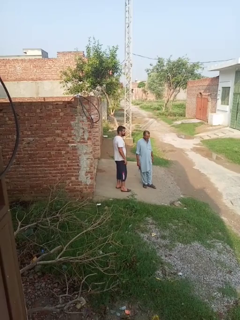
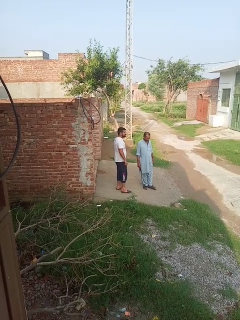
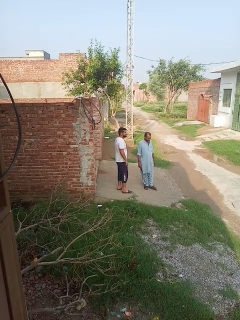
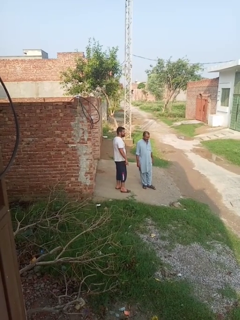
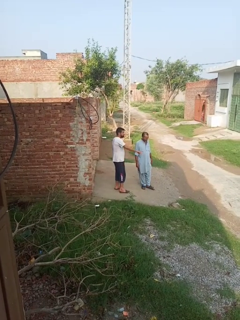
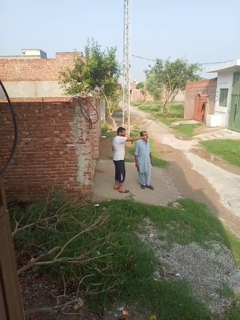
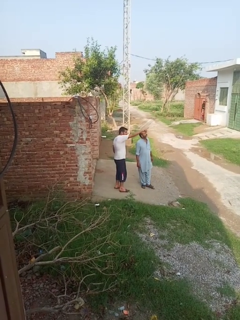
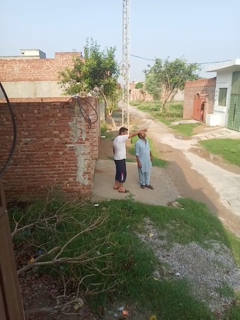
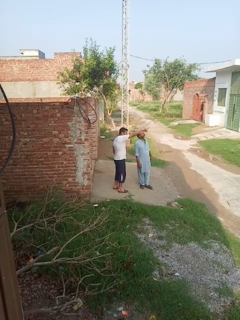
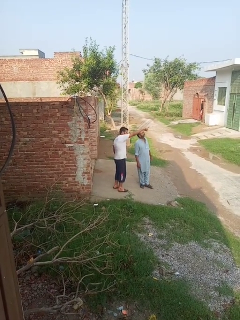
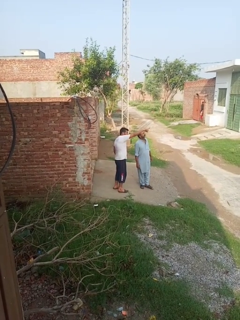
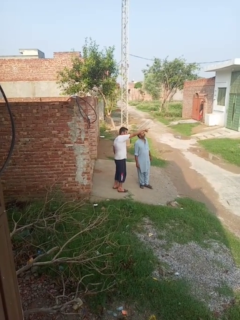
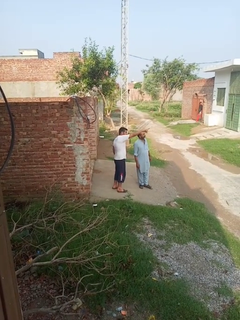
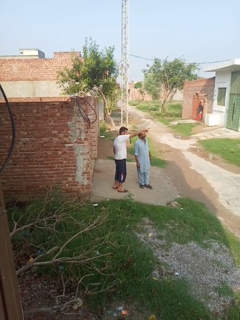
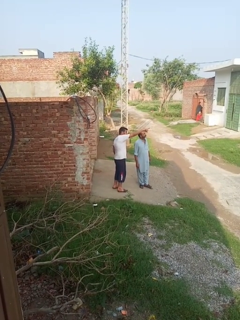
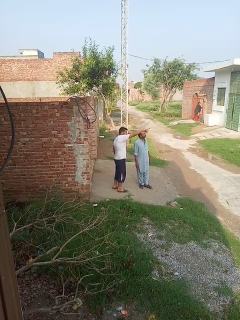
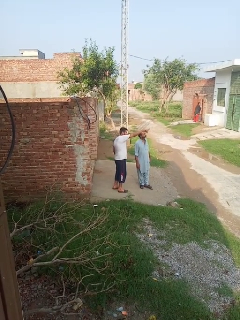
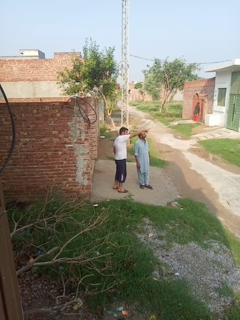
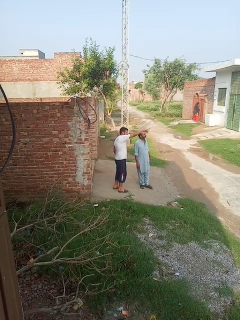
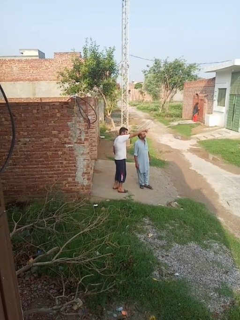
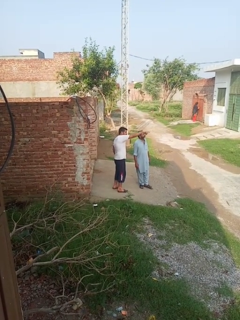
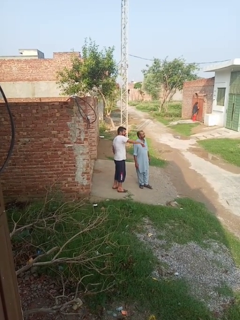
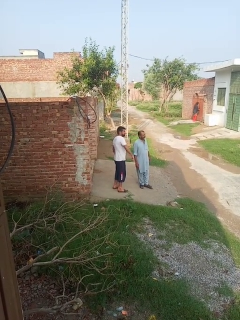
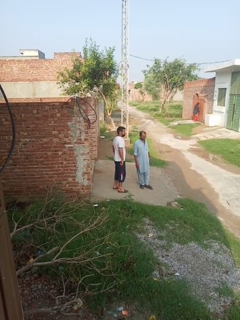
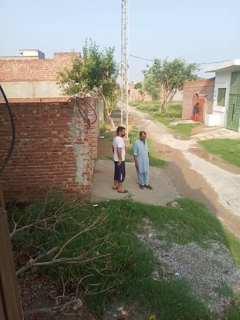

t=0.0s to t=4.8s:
person points at person

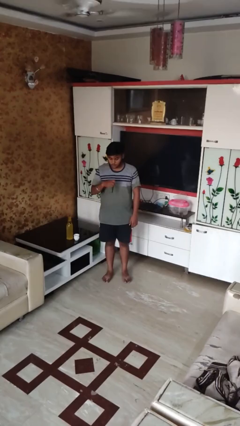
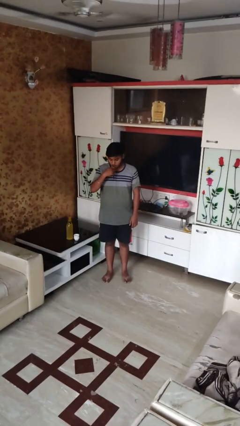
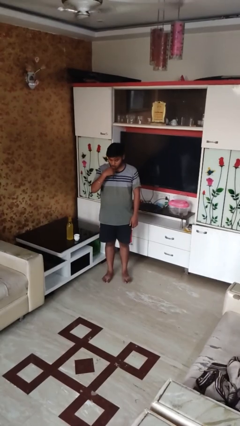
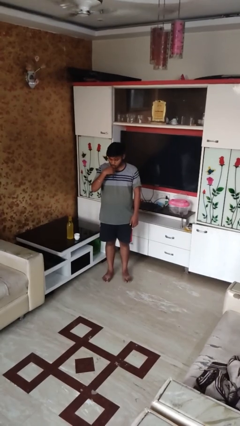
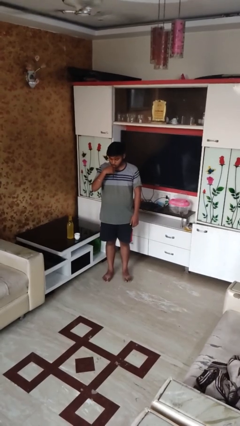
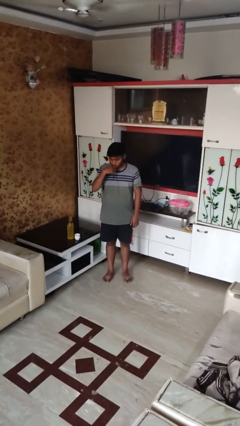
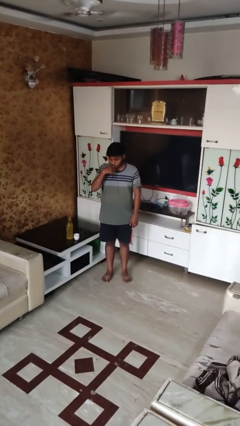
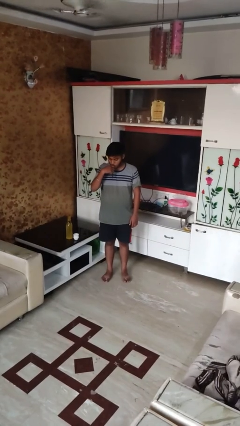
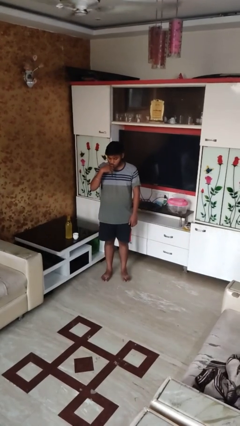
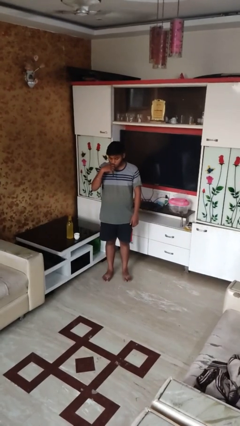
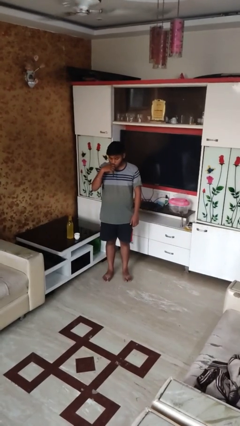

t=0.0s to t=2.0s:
person vapes

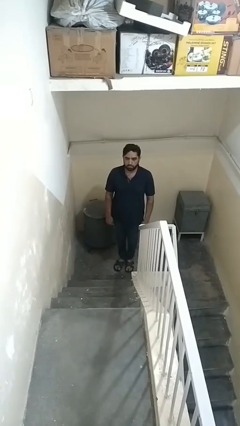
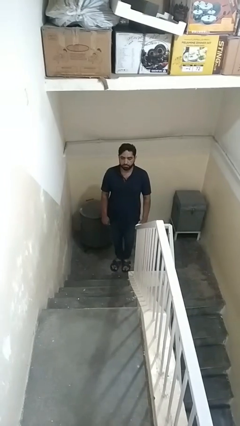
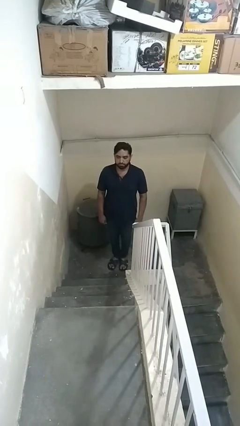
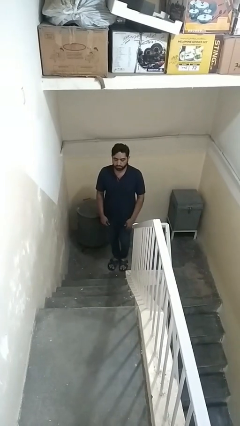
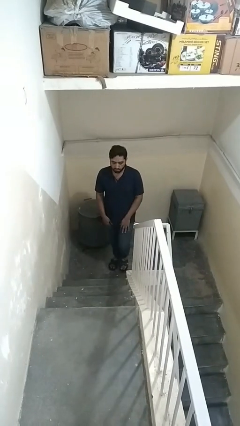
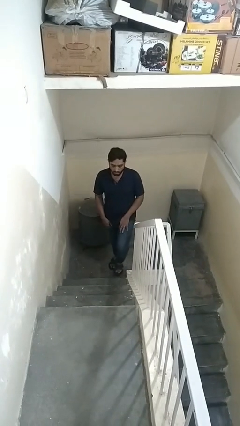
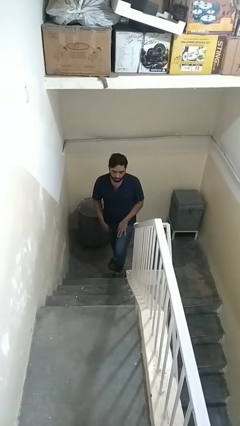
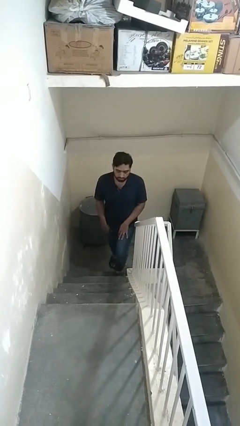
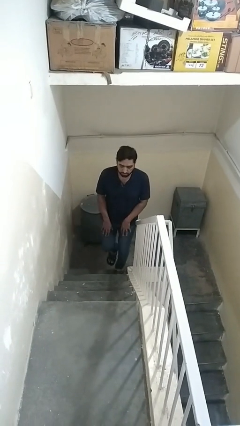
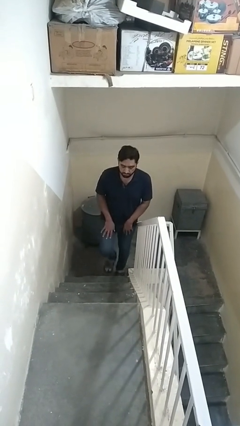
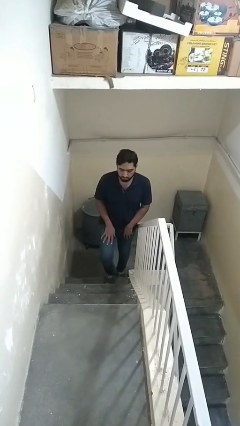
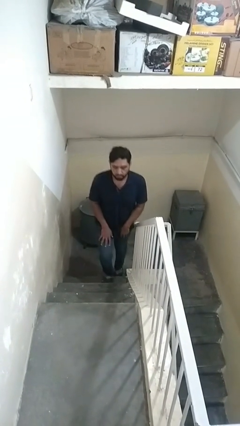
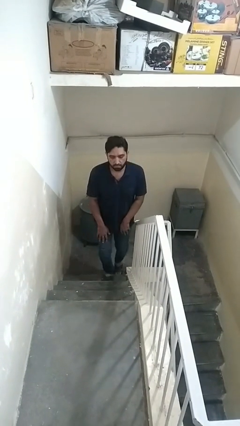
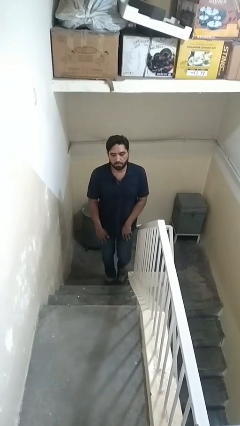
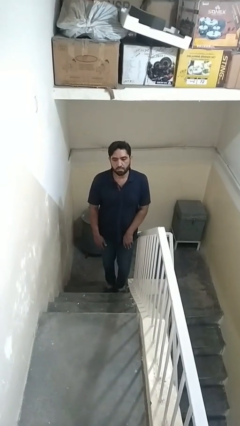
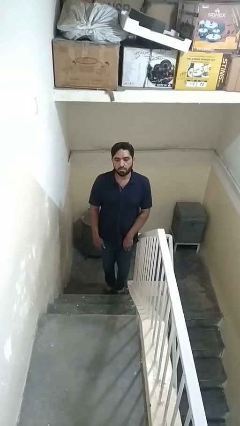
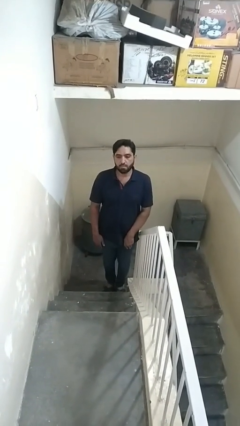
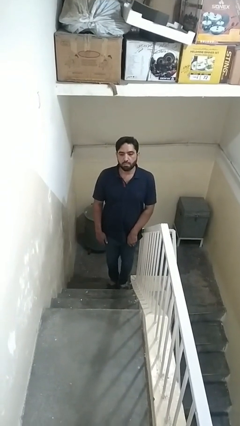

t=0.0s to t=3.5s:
person climbs up stairs

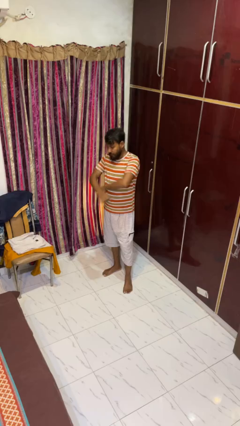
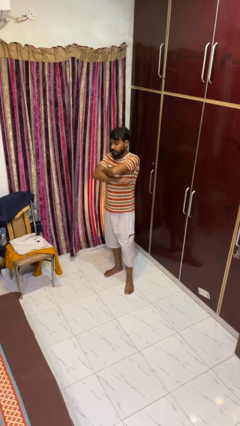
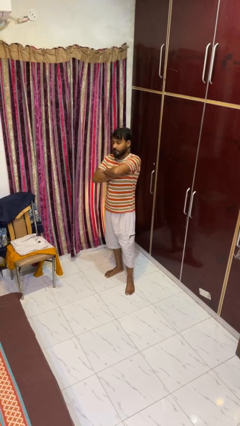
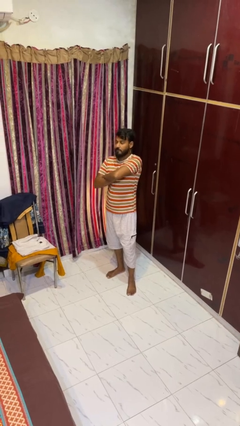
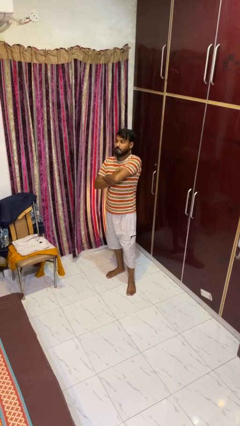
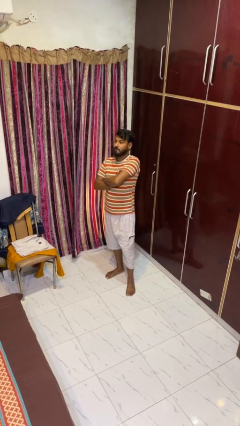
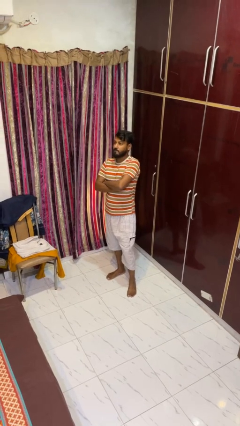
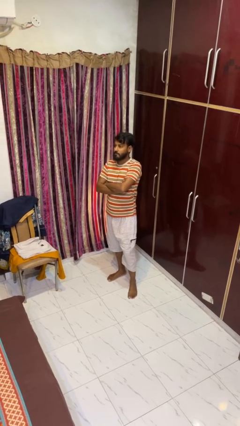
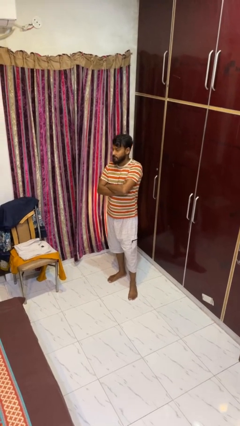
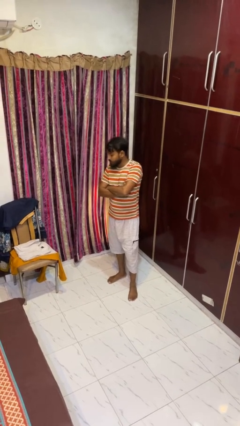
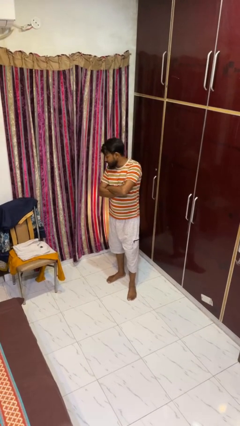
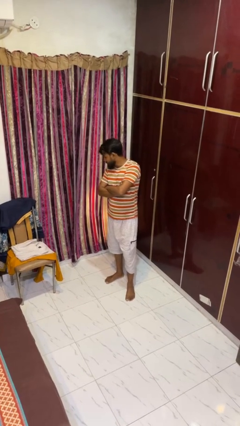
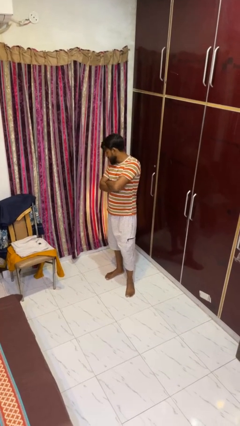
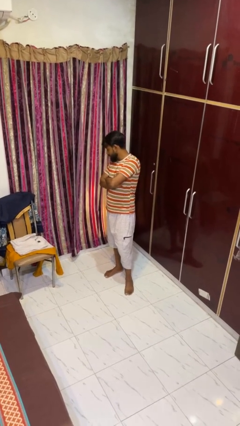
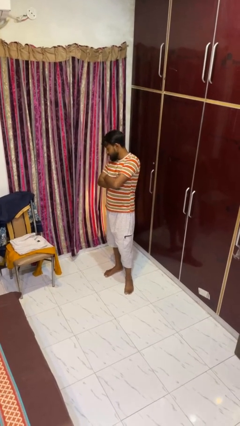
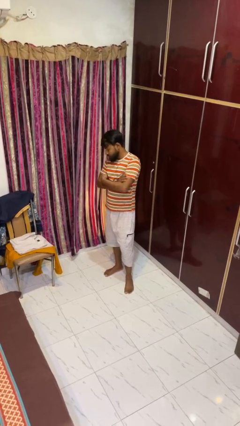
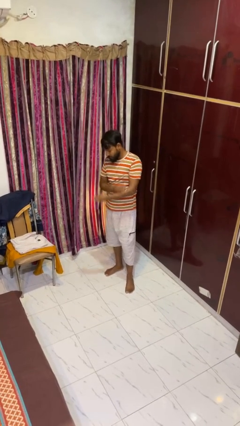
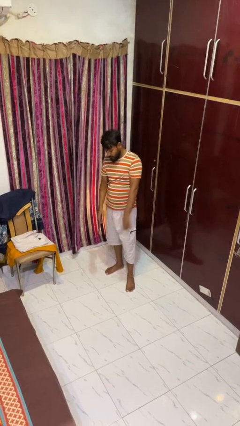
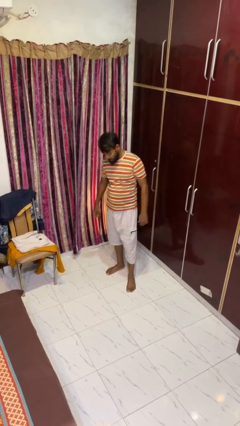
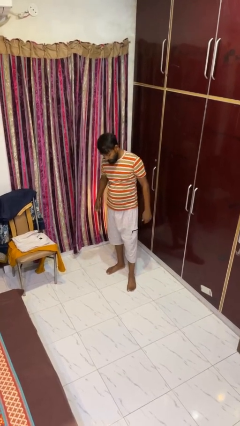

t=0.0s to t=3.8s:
person crosses arms

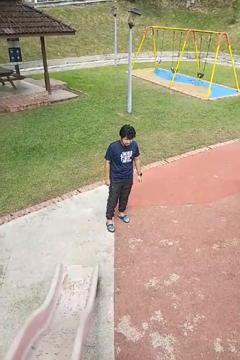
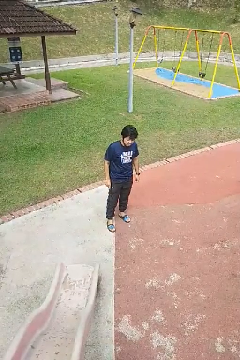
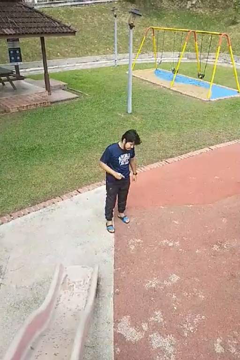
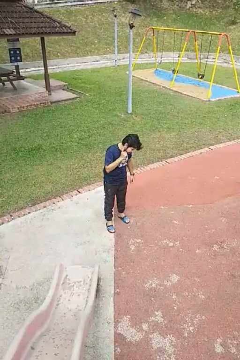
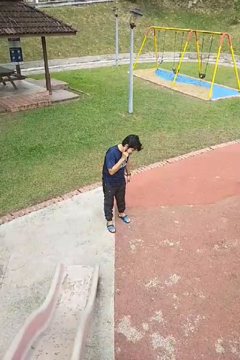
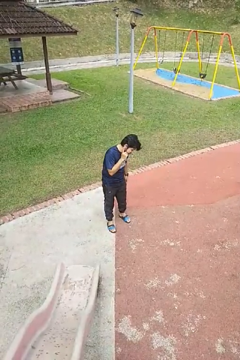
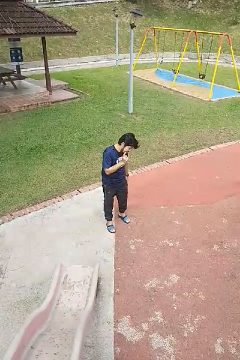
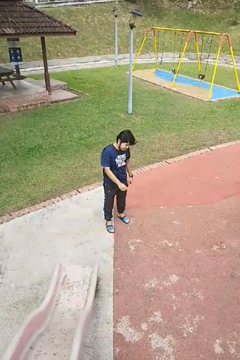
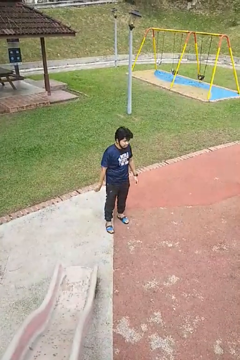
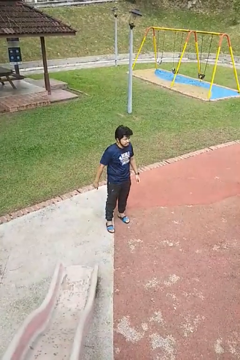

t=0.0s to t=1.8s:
person gestures listen closely

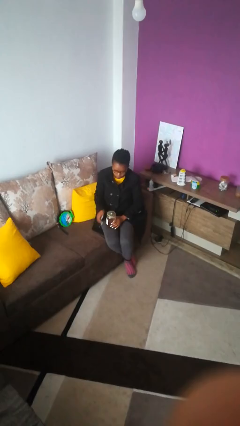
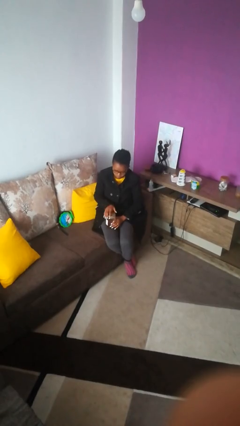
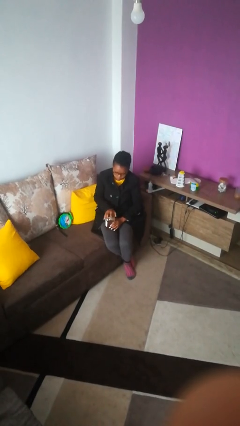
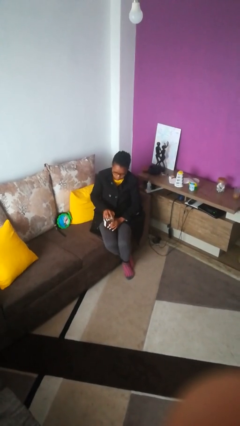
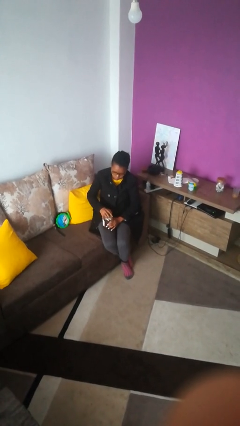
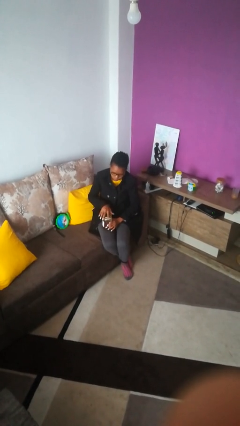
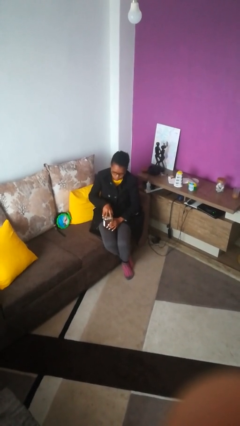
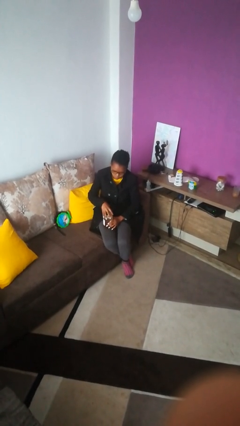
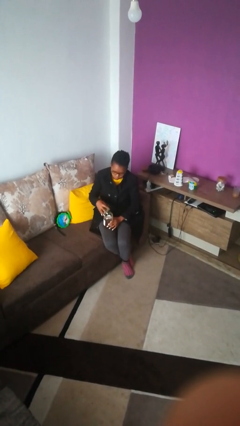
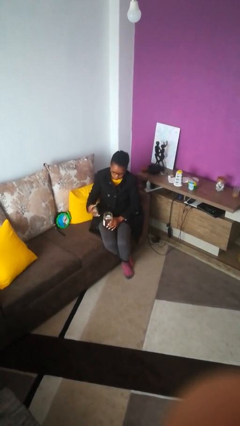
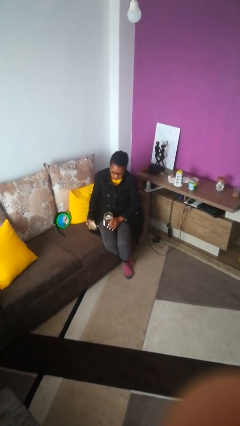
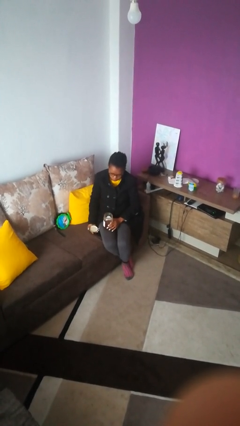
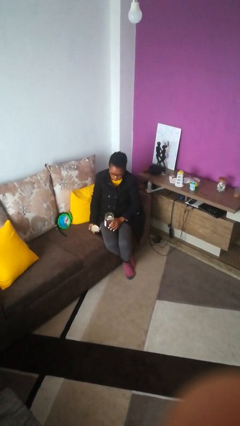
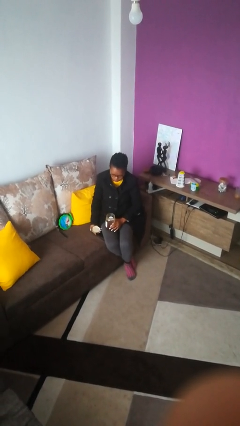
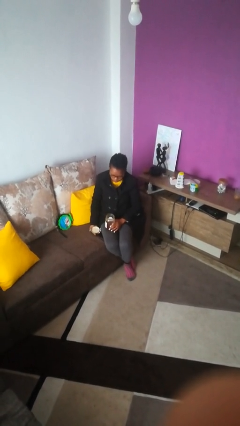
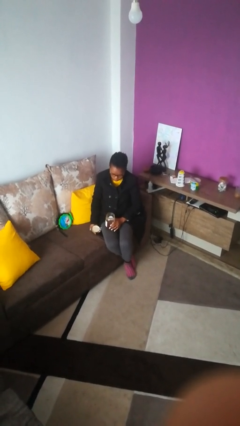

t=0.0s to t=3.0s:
person opens jar
